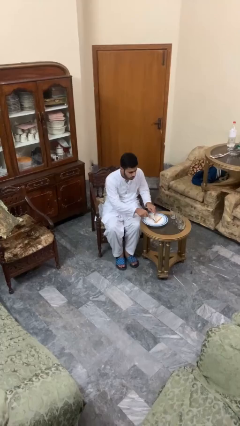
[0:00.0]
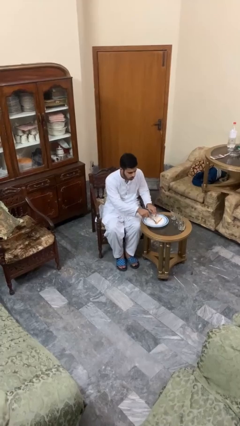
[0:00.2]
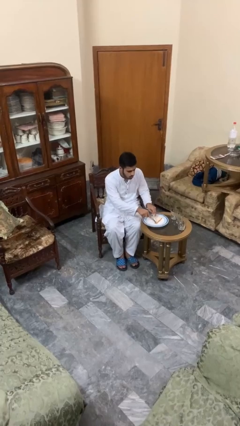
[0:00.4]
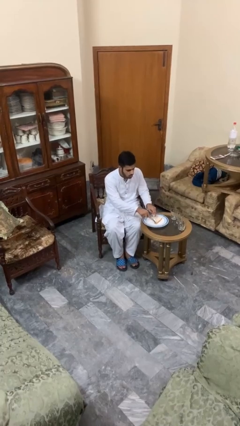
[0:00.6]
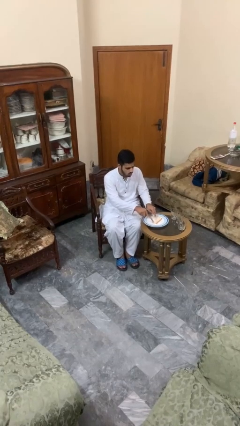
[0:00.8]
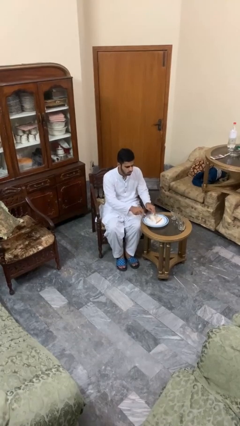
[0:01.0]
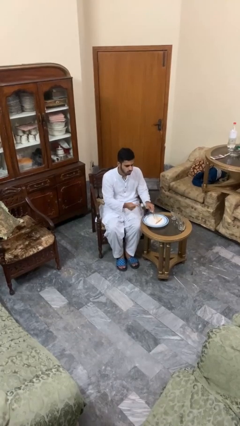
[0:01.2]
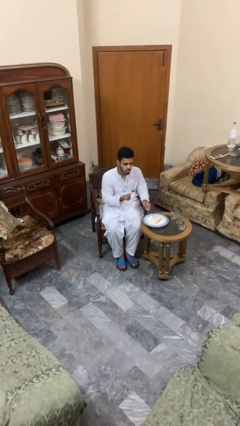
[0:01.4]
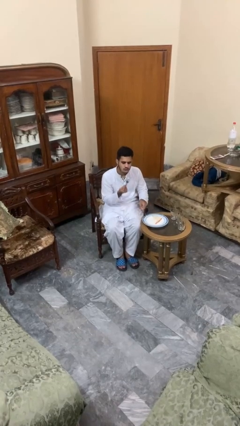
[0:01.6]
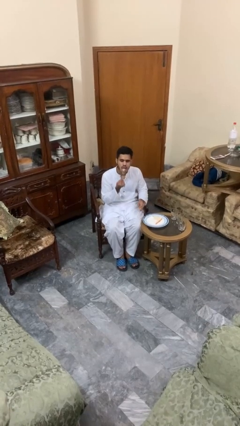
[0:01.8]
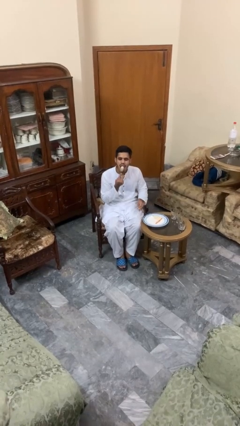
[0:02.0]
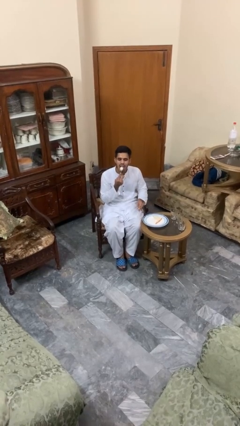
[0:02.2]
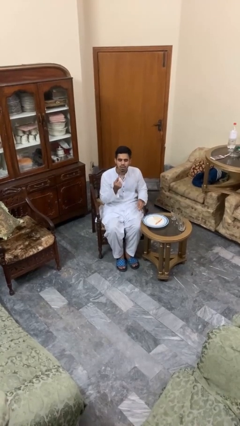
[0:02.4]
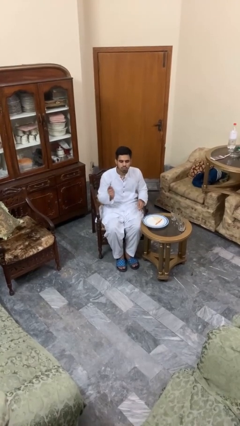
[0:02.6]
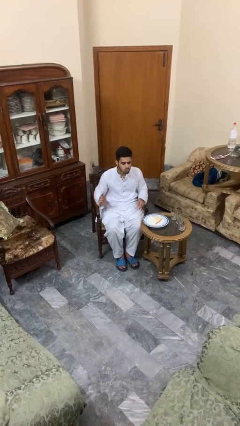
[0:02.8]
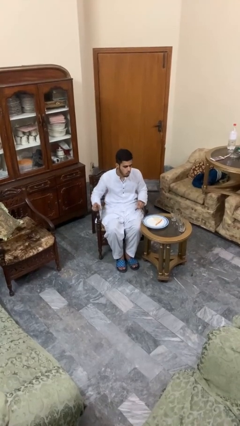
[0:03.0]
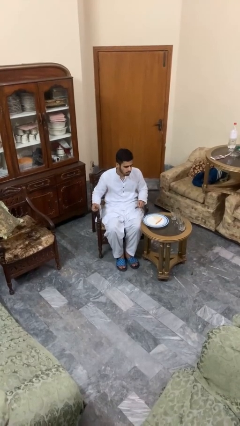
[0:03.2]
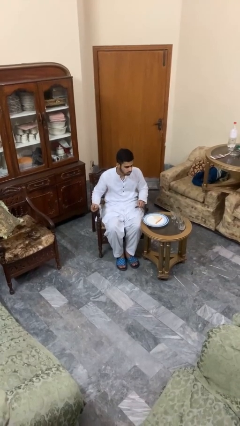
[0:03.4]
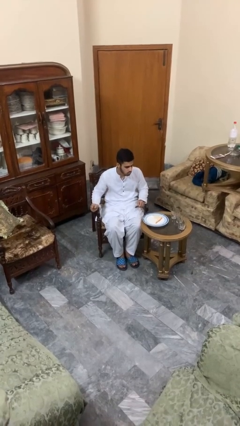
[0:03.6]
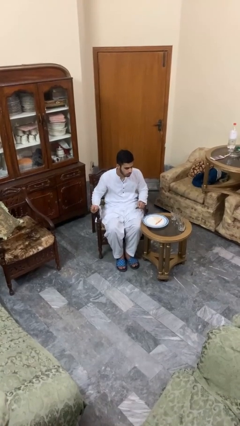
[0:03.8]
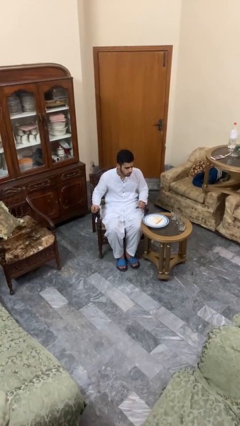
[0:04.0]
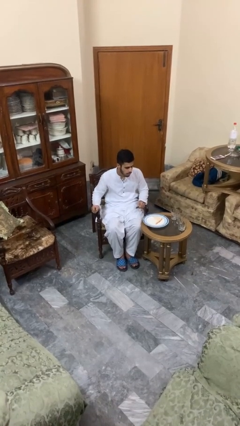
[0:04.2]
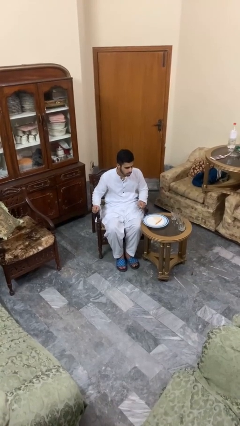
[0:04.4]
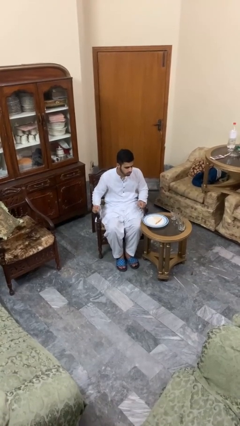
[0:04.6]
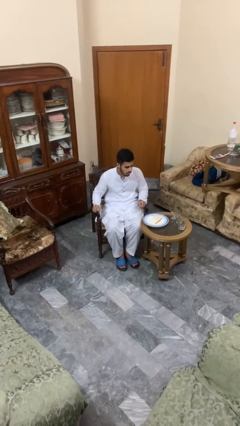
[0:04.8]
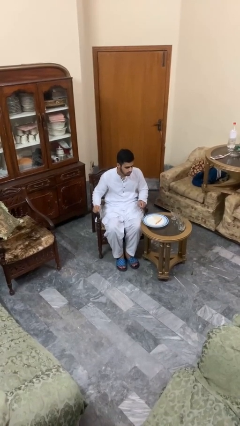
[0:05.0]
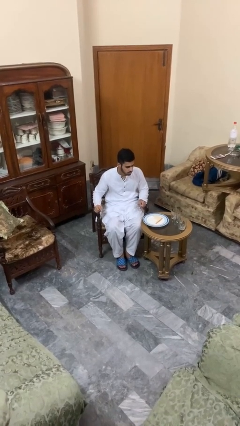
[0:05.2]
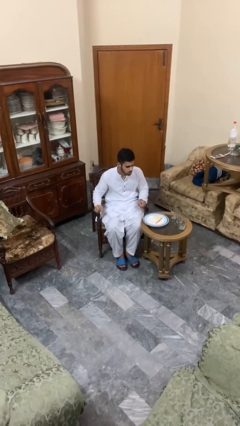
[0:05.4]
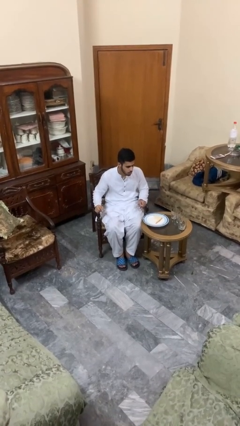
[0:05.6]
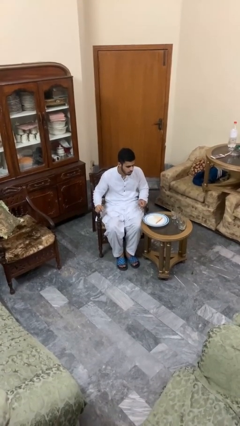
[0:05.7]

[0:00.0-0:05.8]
person eats with utensil

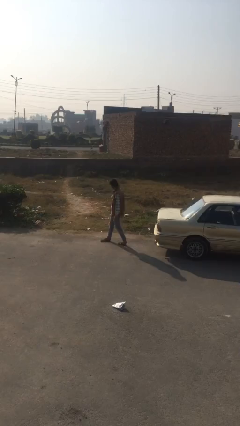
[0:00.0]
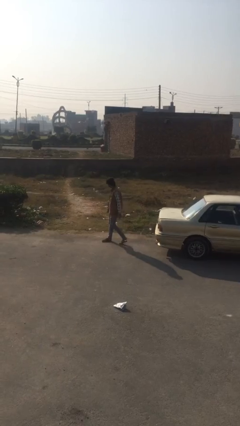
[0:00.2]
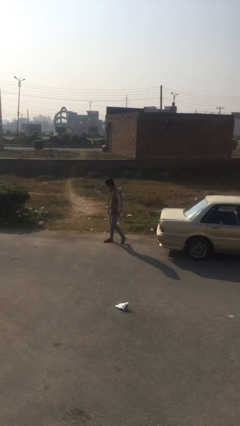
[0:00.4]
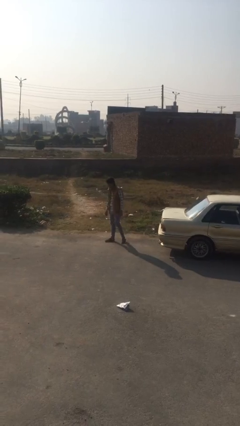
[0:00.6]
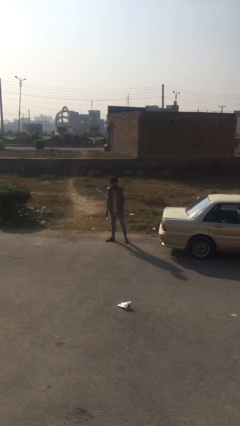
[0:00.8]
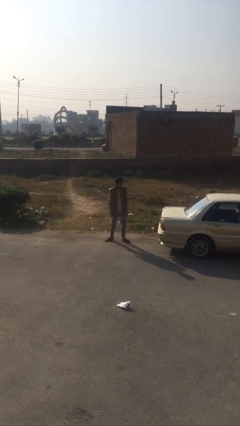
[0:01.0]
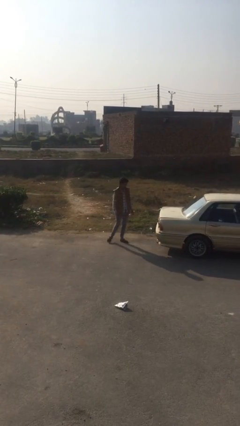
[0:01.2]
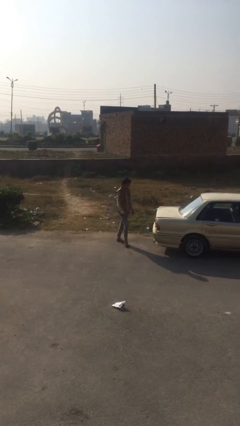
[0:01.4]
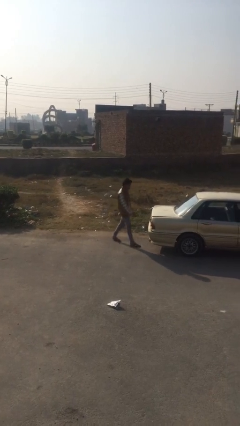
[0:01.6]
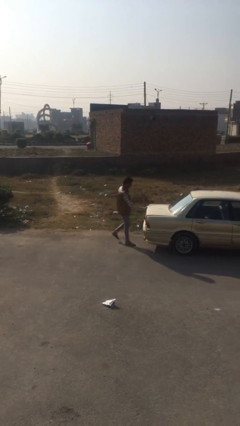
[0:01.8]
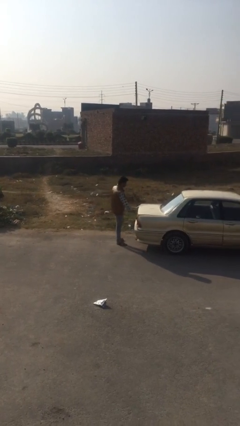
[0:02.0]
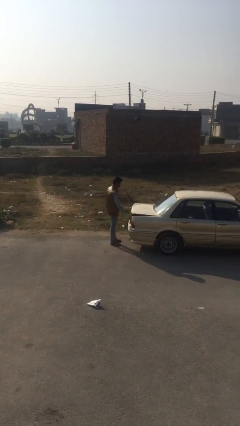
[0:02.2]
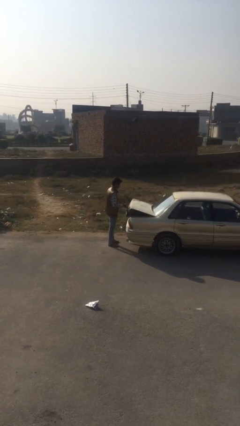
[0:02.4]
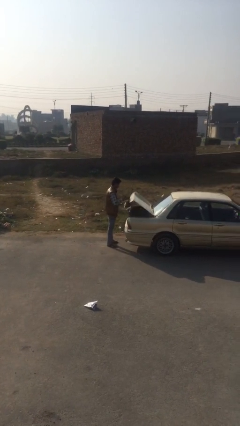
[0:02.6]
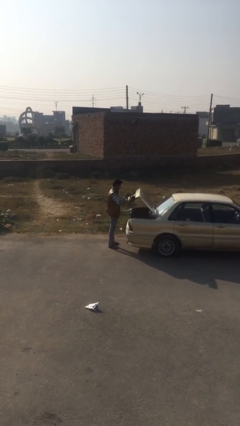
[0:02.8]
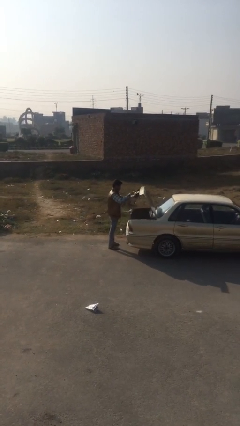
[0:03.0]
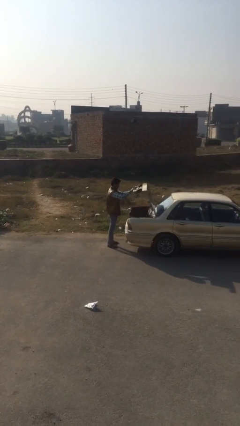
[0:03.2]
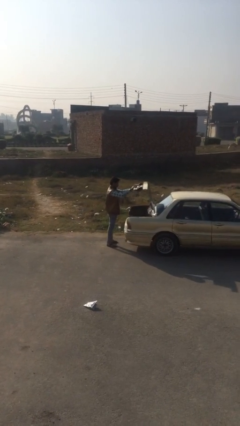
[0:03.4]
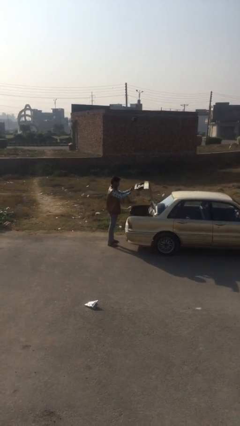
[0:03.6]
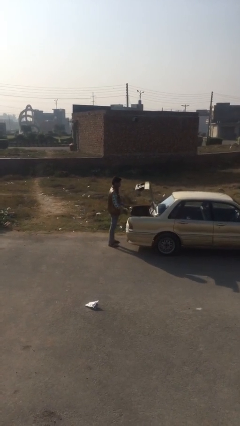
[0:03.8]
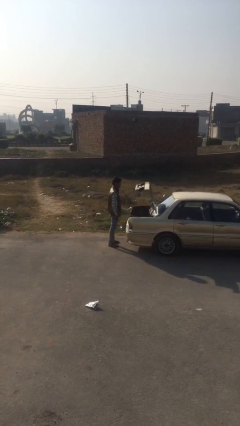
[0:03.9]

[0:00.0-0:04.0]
person opens car trunk

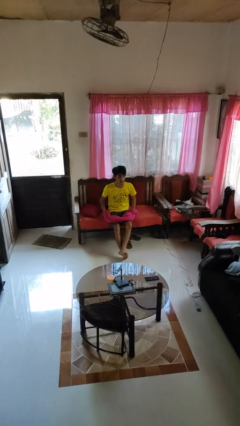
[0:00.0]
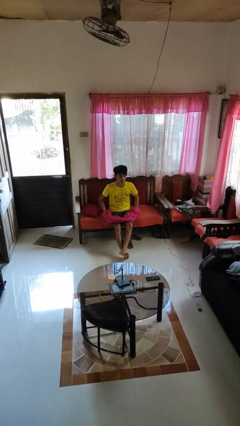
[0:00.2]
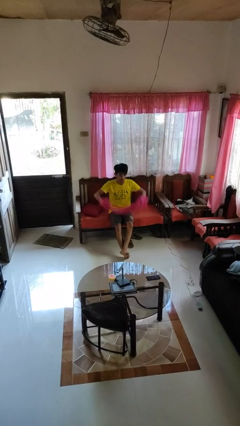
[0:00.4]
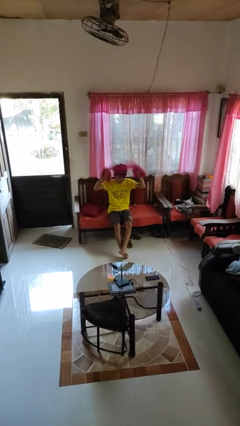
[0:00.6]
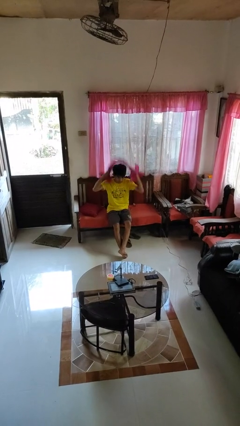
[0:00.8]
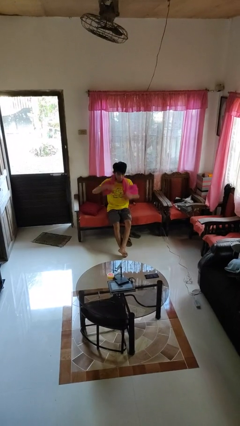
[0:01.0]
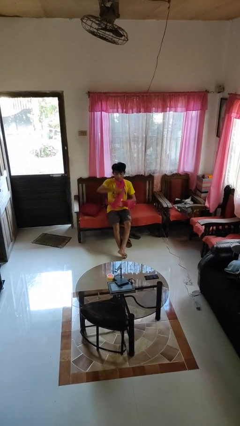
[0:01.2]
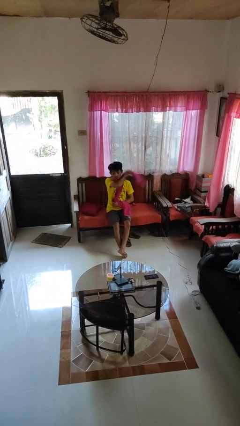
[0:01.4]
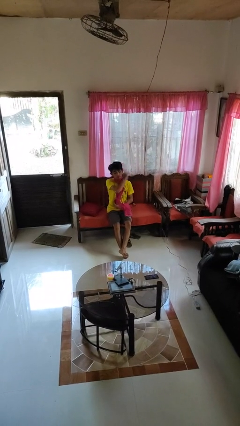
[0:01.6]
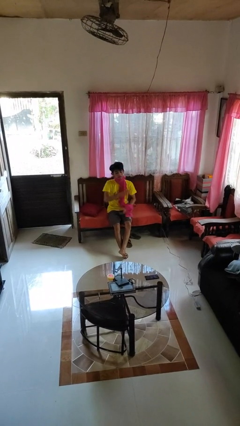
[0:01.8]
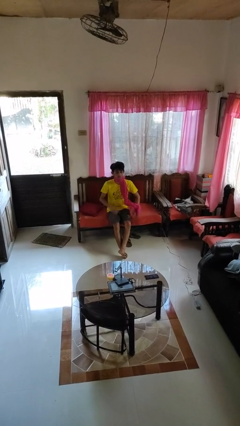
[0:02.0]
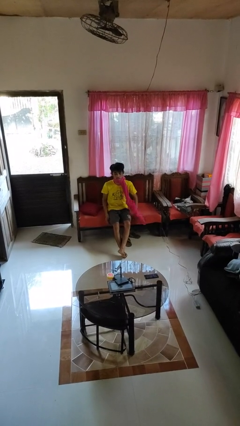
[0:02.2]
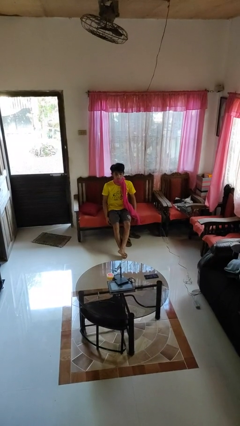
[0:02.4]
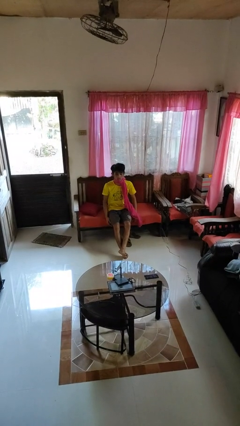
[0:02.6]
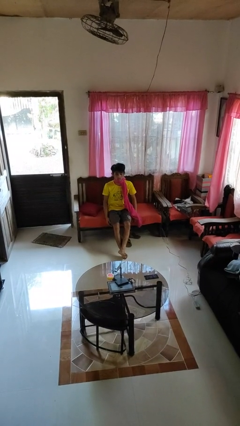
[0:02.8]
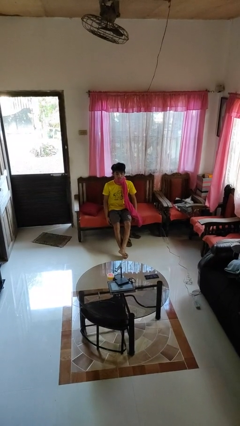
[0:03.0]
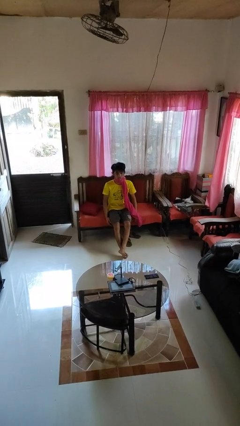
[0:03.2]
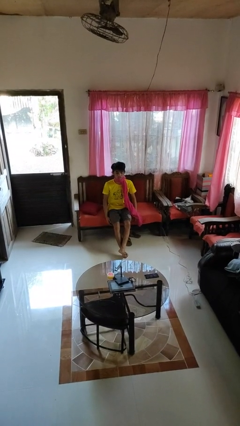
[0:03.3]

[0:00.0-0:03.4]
person puts on scarf

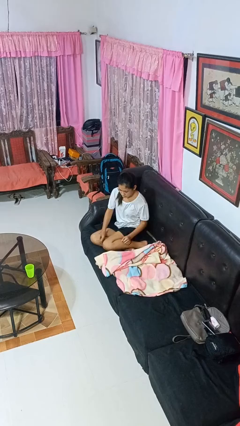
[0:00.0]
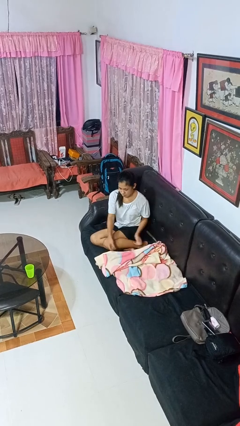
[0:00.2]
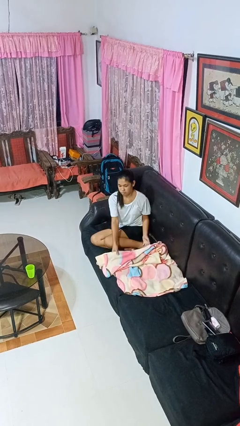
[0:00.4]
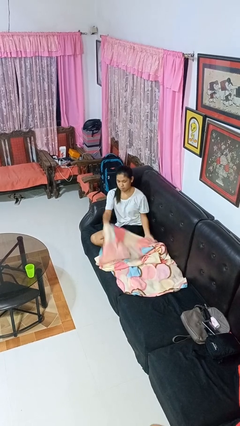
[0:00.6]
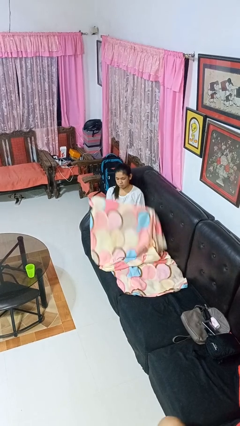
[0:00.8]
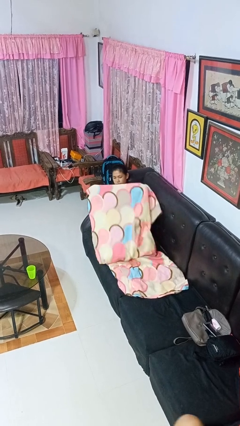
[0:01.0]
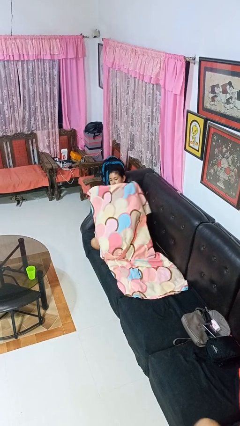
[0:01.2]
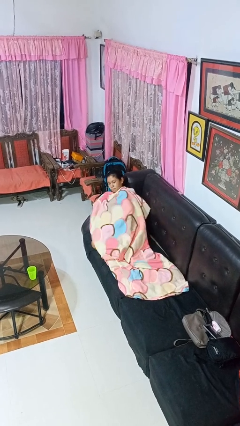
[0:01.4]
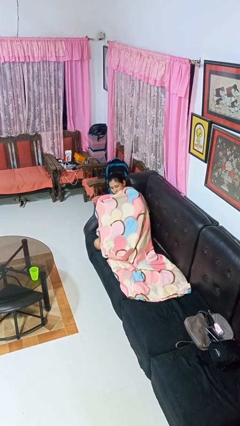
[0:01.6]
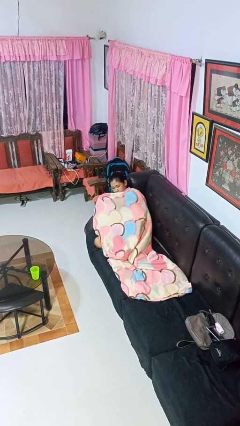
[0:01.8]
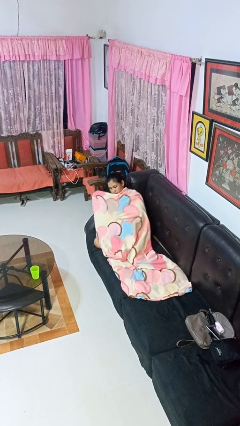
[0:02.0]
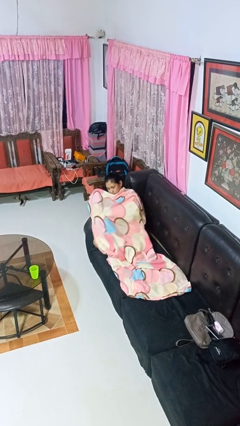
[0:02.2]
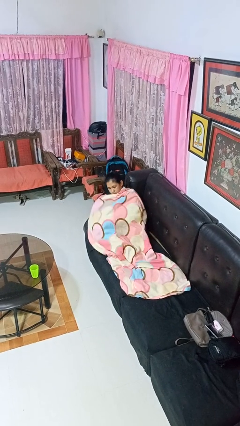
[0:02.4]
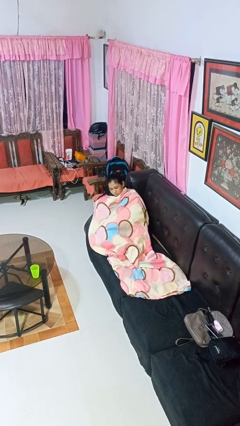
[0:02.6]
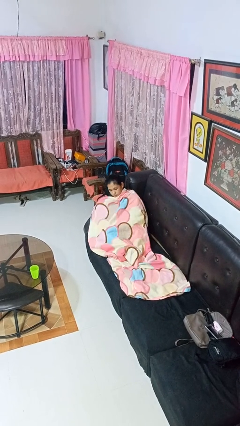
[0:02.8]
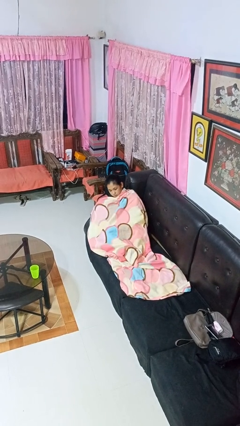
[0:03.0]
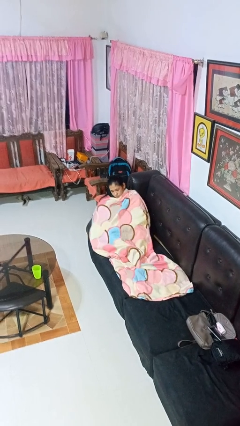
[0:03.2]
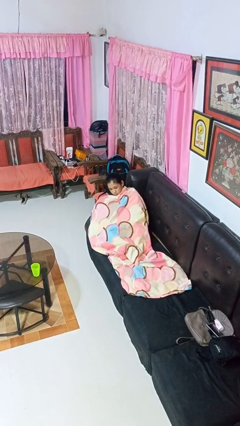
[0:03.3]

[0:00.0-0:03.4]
person covers with blanket

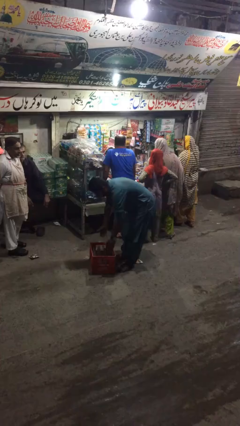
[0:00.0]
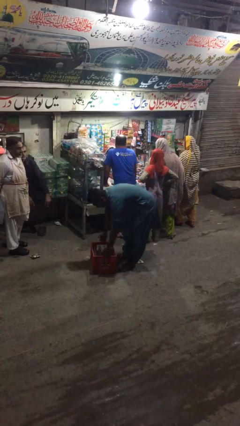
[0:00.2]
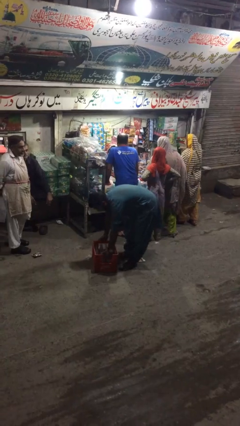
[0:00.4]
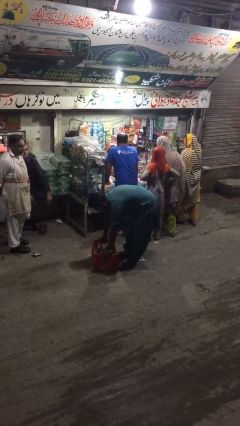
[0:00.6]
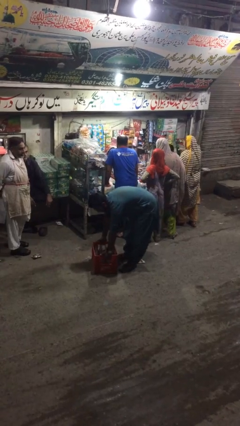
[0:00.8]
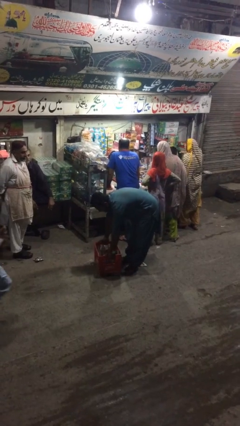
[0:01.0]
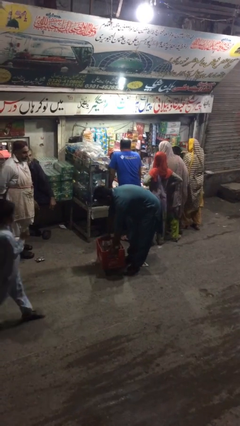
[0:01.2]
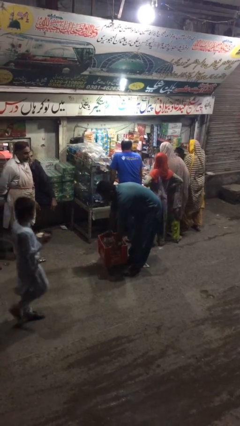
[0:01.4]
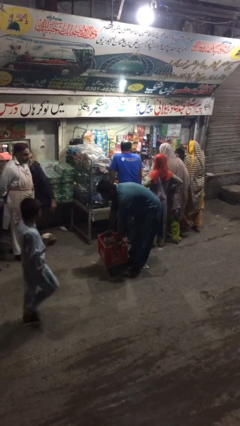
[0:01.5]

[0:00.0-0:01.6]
person picks up object from floor
